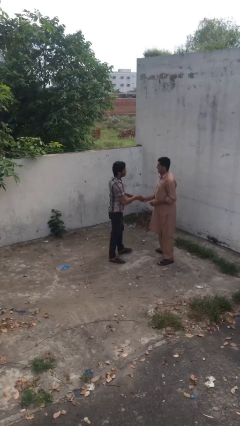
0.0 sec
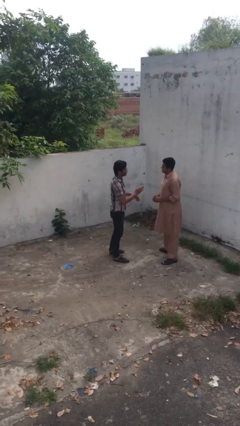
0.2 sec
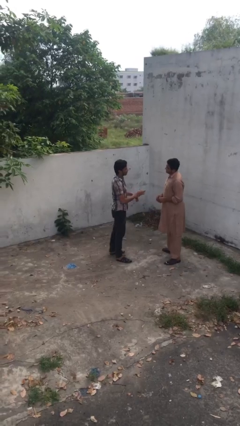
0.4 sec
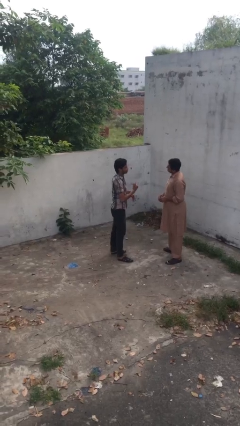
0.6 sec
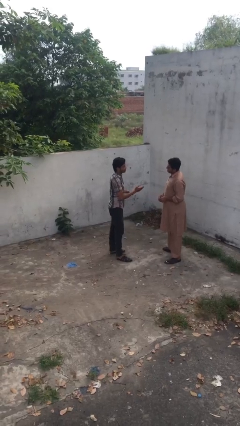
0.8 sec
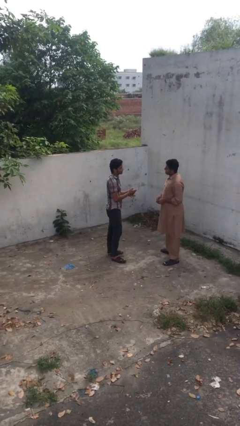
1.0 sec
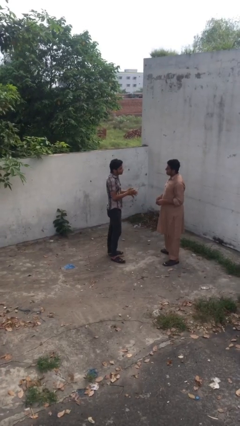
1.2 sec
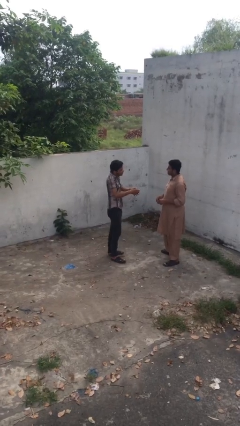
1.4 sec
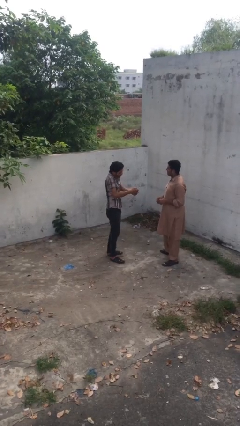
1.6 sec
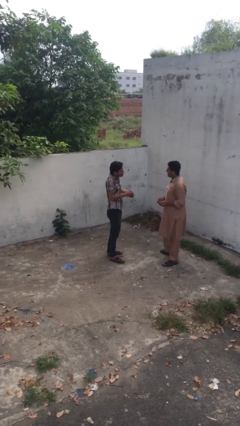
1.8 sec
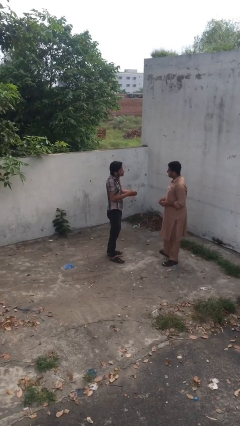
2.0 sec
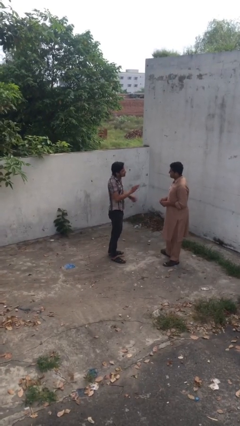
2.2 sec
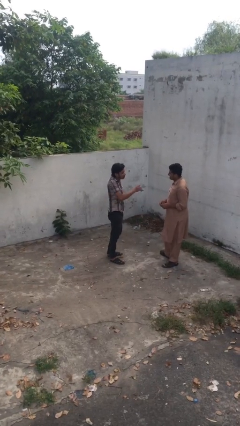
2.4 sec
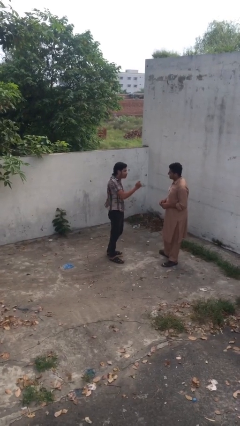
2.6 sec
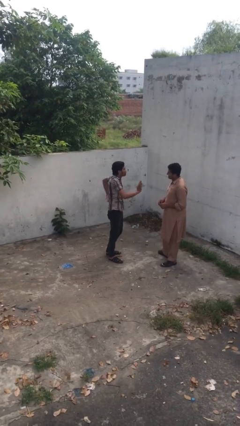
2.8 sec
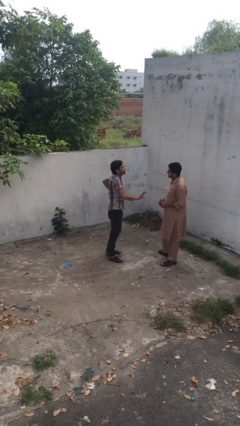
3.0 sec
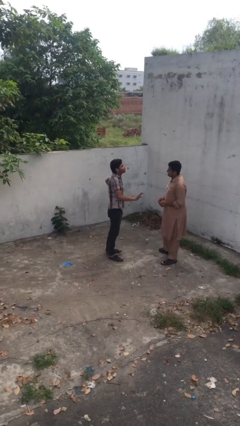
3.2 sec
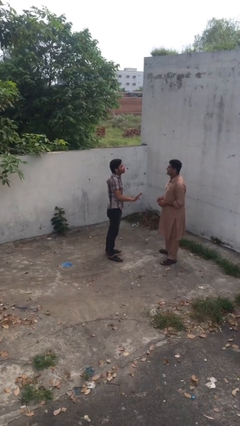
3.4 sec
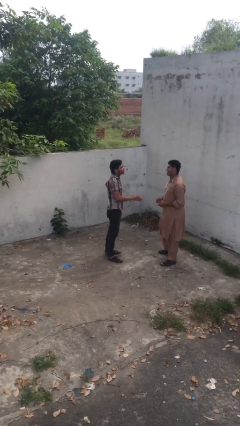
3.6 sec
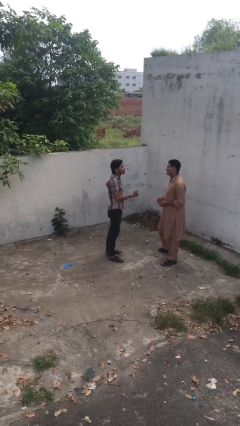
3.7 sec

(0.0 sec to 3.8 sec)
person talks to person

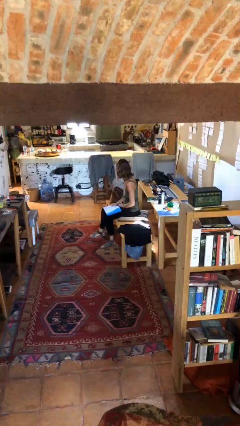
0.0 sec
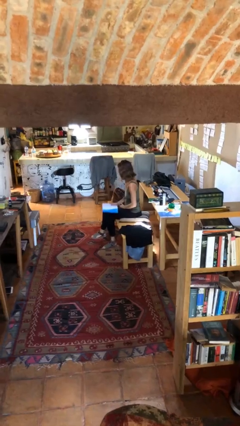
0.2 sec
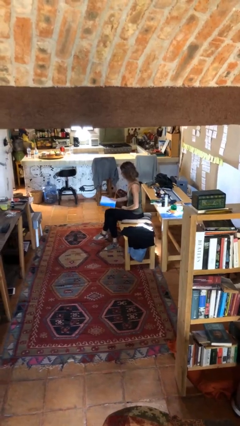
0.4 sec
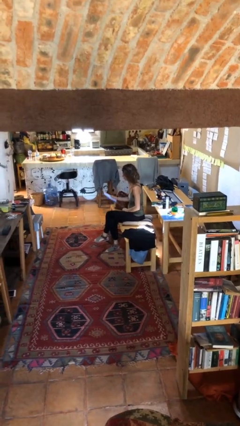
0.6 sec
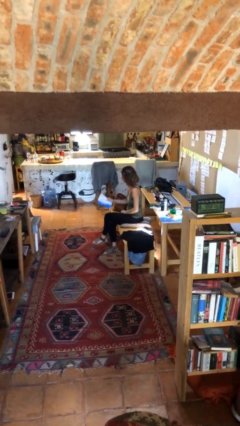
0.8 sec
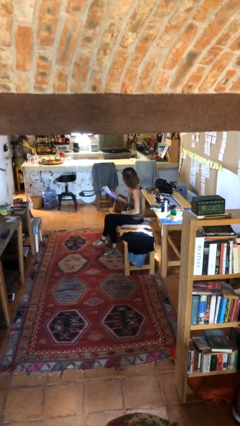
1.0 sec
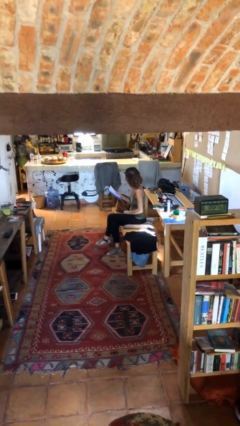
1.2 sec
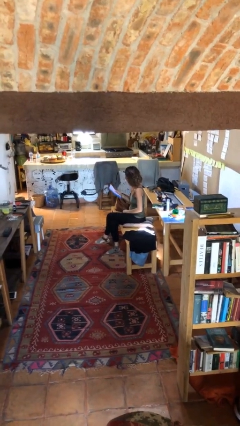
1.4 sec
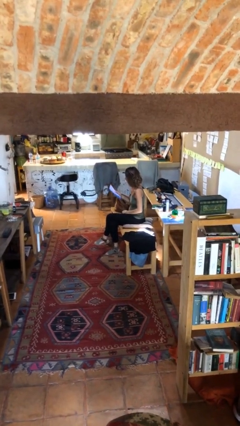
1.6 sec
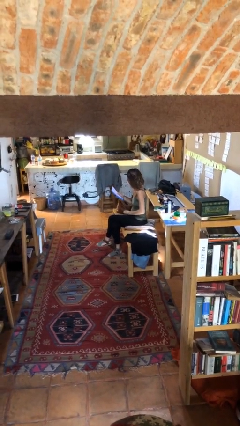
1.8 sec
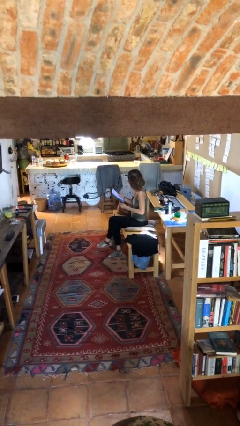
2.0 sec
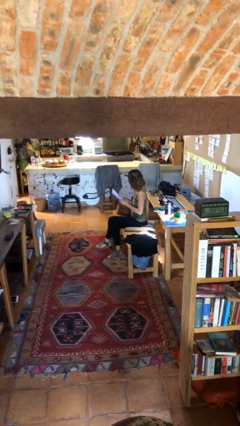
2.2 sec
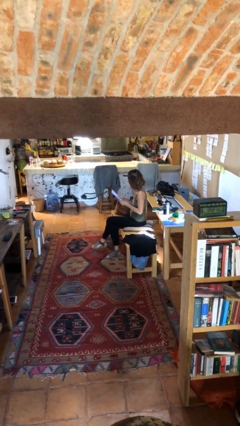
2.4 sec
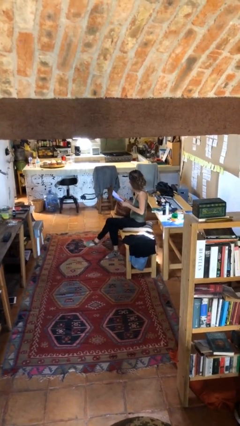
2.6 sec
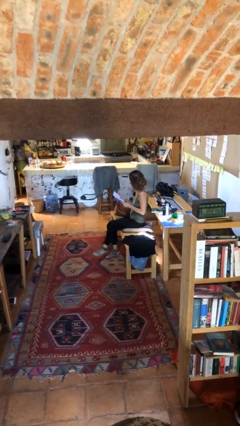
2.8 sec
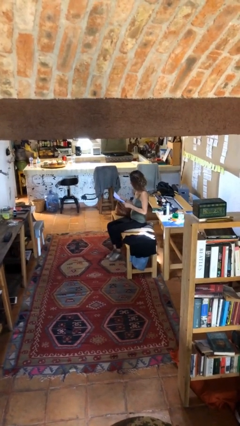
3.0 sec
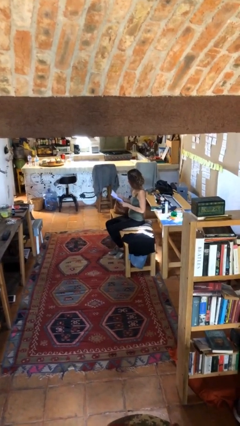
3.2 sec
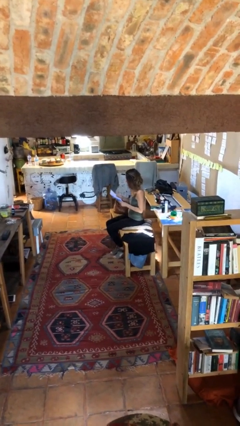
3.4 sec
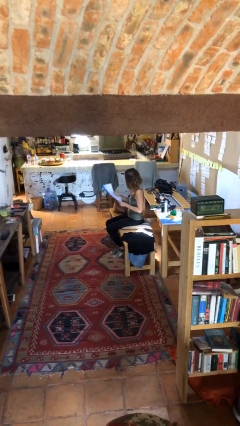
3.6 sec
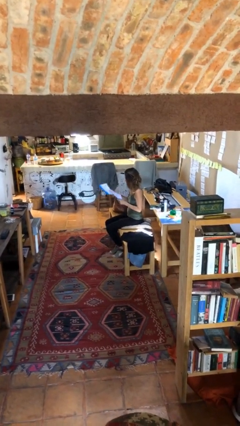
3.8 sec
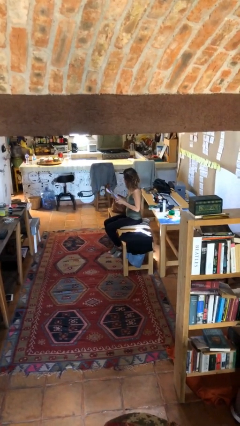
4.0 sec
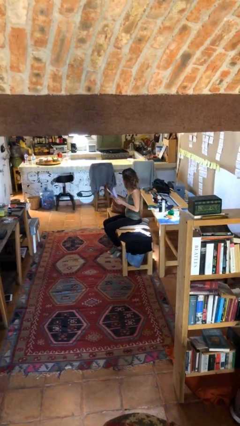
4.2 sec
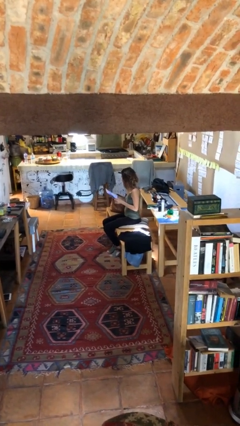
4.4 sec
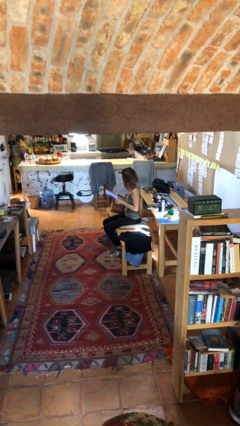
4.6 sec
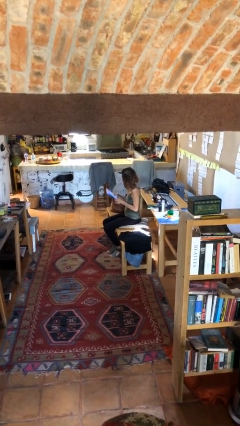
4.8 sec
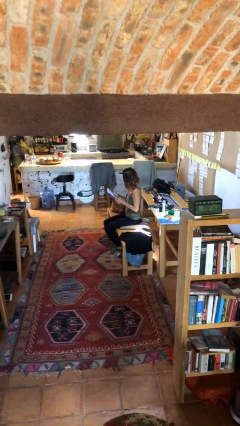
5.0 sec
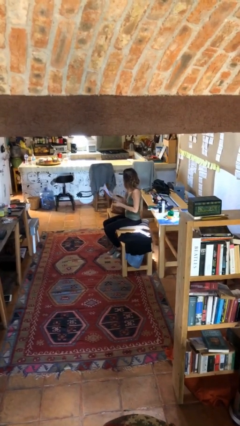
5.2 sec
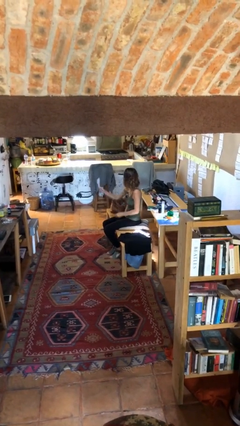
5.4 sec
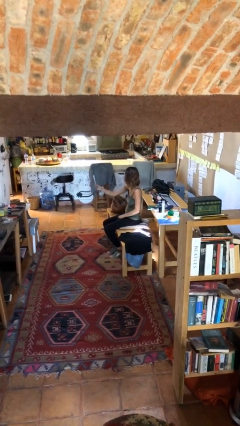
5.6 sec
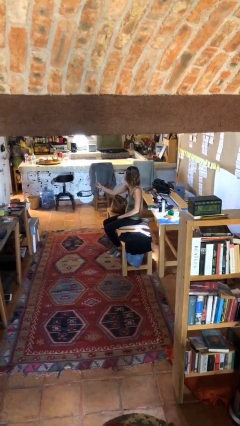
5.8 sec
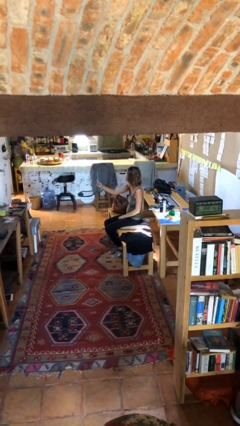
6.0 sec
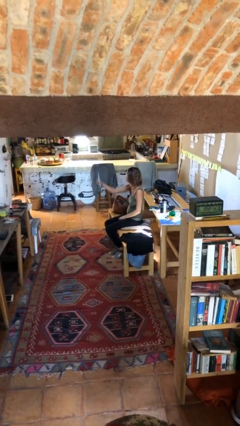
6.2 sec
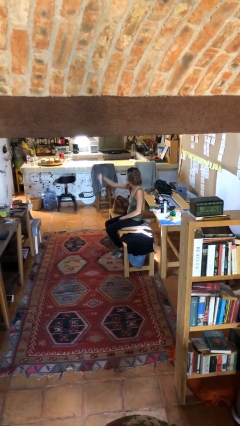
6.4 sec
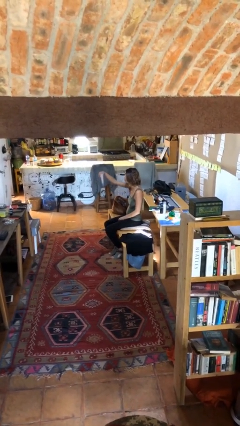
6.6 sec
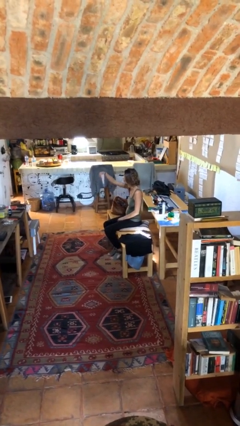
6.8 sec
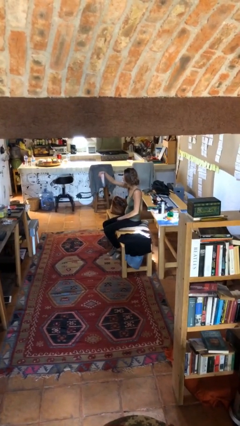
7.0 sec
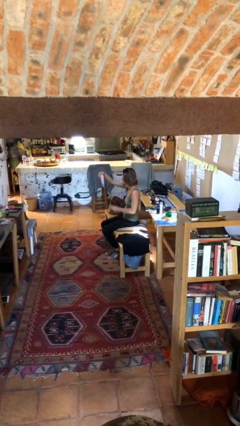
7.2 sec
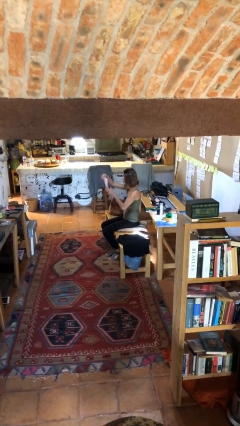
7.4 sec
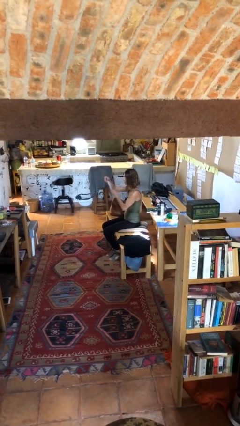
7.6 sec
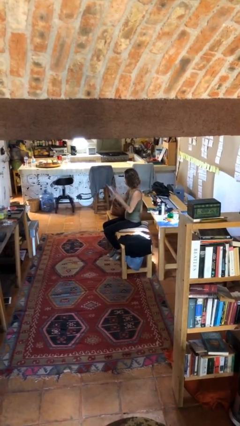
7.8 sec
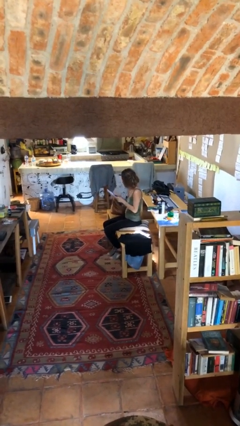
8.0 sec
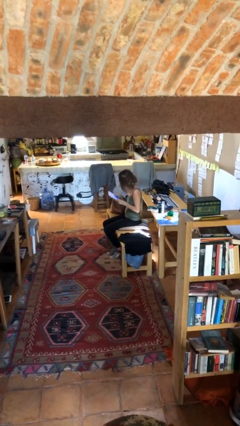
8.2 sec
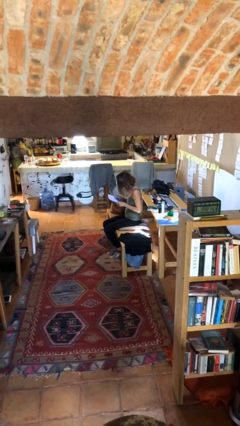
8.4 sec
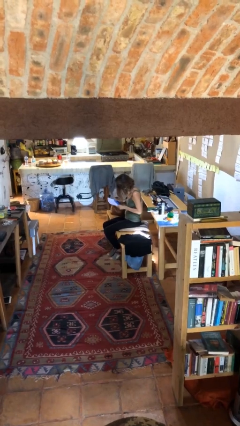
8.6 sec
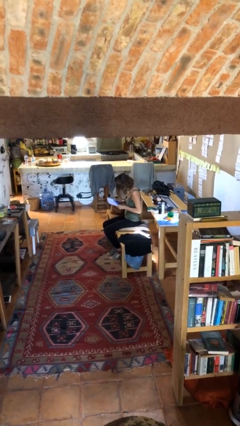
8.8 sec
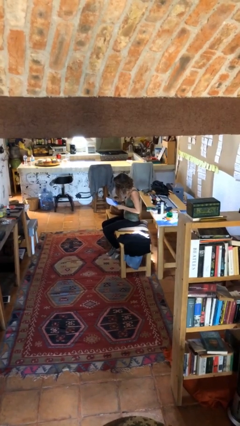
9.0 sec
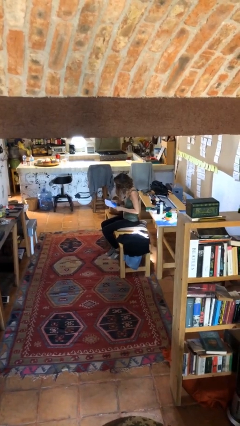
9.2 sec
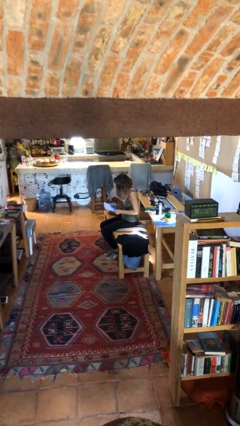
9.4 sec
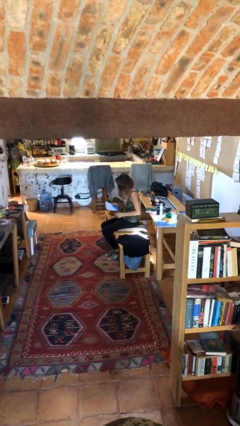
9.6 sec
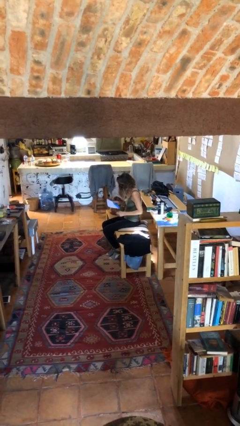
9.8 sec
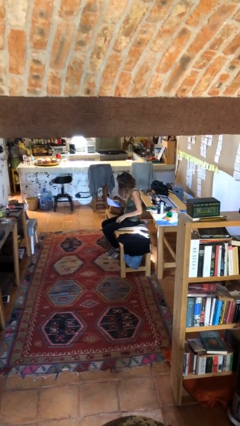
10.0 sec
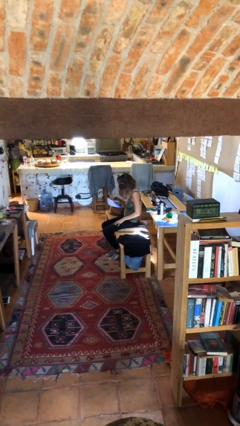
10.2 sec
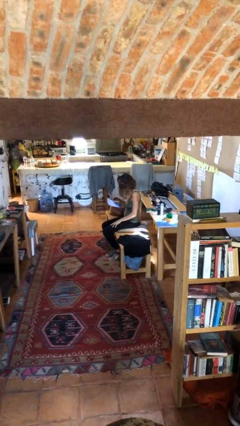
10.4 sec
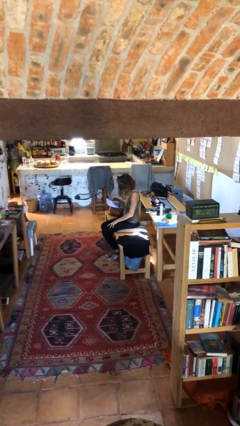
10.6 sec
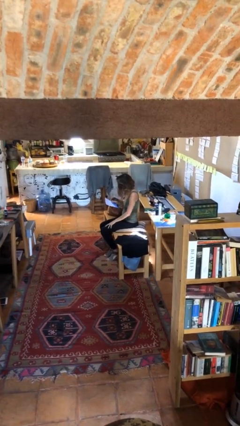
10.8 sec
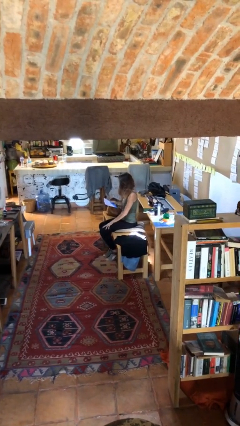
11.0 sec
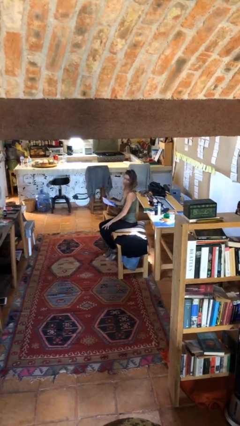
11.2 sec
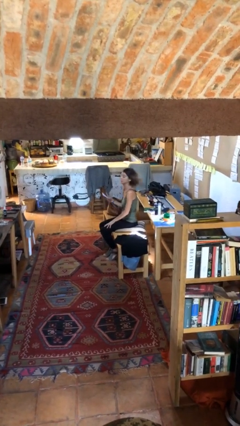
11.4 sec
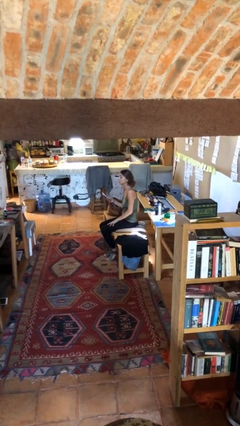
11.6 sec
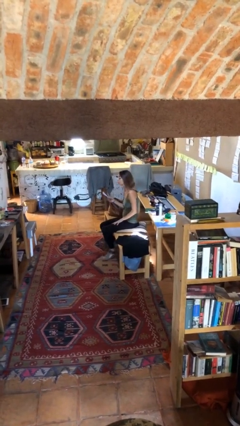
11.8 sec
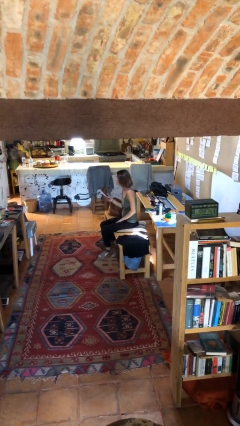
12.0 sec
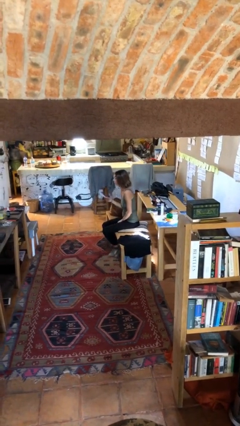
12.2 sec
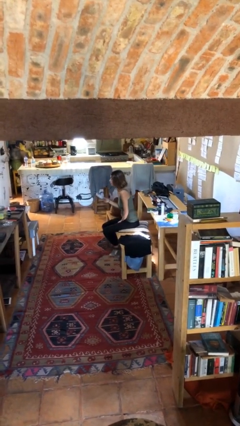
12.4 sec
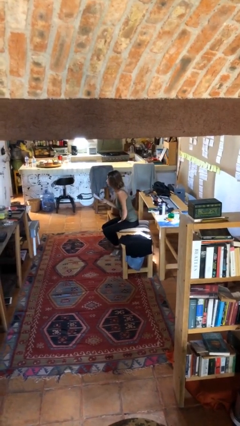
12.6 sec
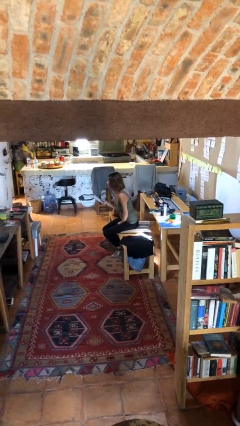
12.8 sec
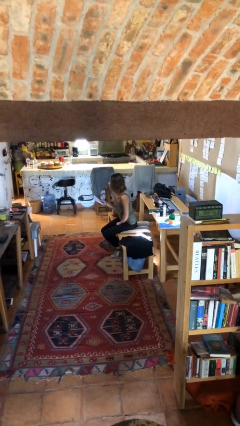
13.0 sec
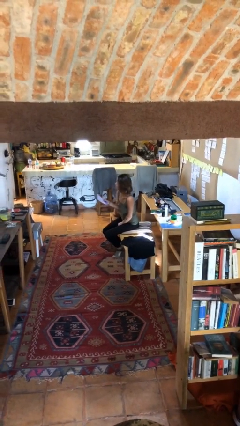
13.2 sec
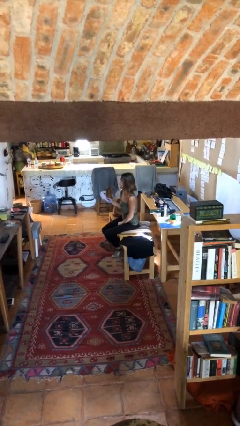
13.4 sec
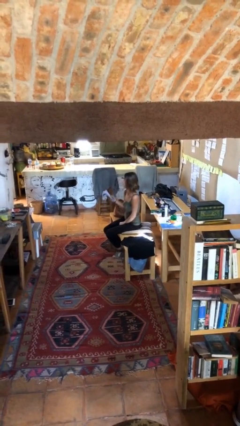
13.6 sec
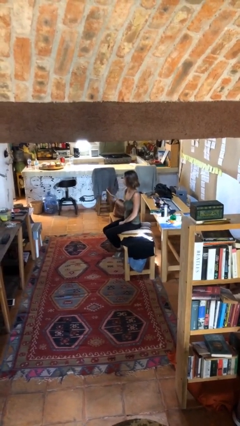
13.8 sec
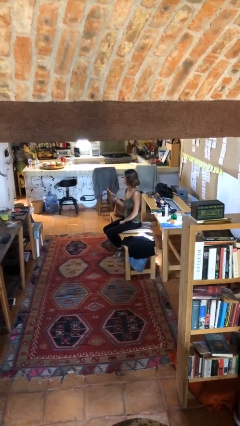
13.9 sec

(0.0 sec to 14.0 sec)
person reads document

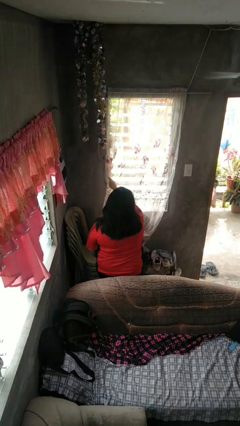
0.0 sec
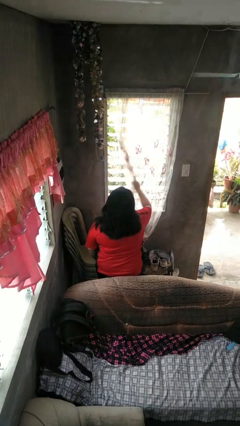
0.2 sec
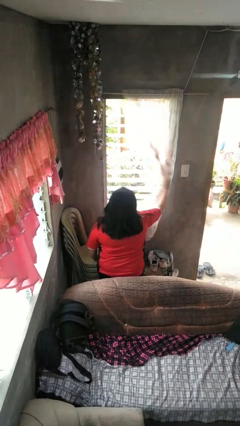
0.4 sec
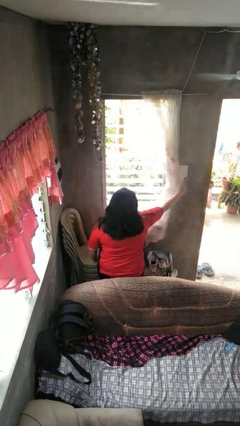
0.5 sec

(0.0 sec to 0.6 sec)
person opens curtains
